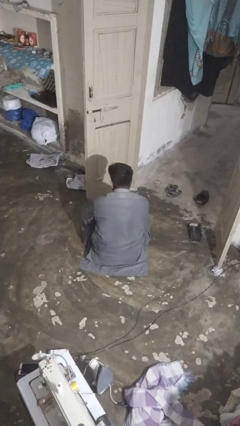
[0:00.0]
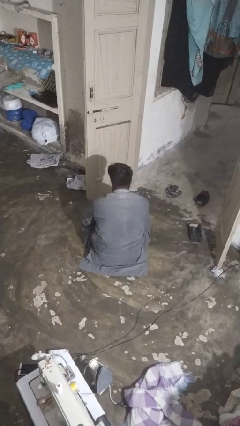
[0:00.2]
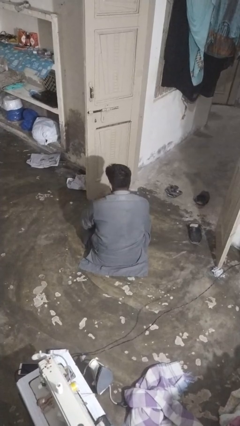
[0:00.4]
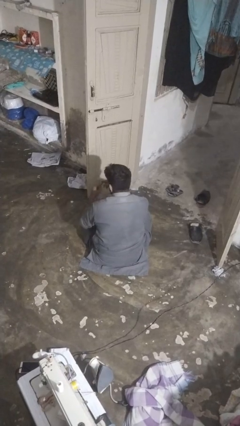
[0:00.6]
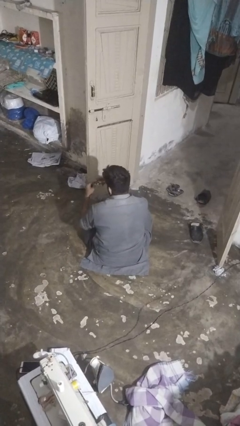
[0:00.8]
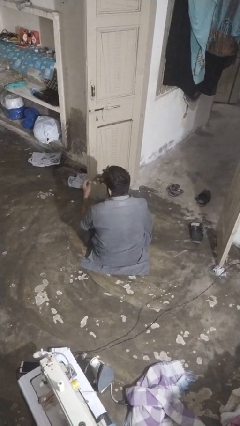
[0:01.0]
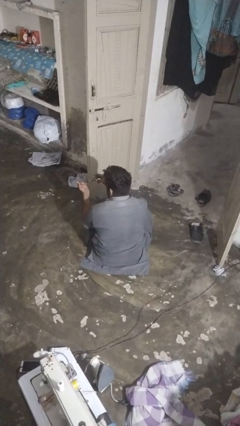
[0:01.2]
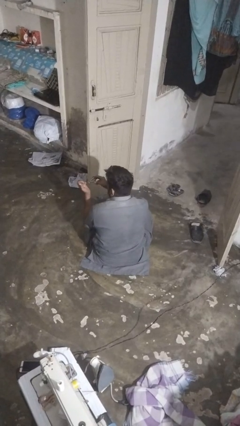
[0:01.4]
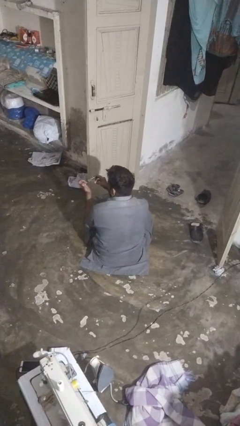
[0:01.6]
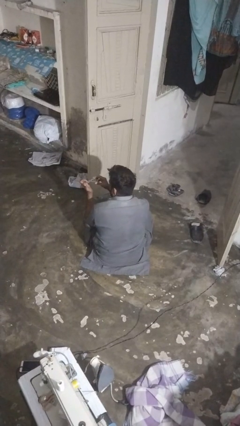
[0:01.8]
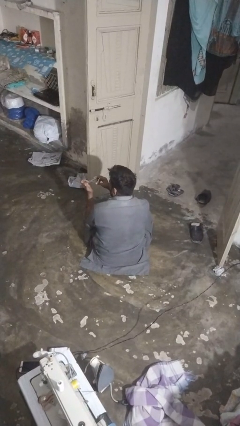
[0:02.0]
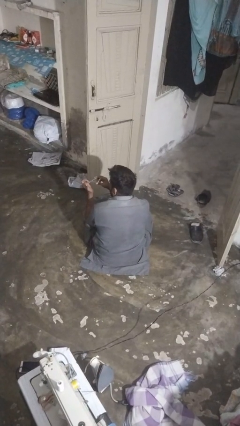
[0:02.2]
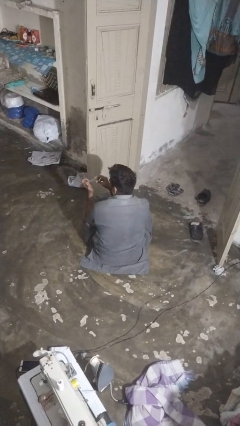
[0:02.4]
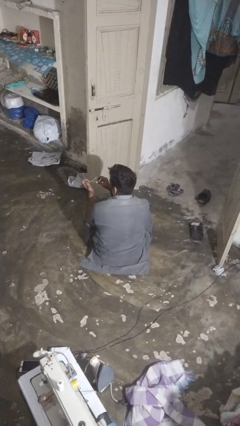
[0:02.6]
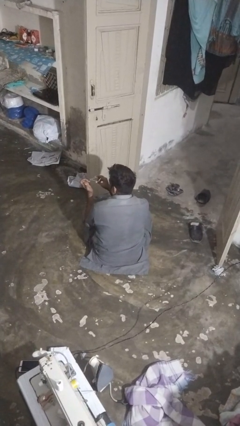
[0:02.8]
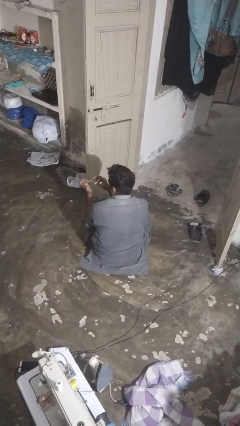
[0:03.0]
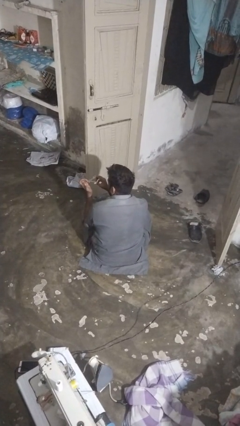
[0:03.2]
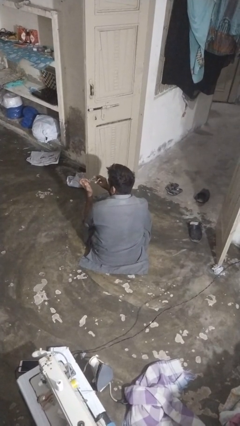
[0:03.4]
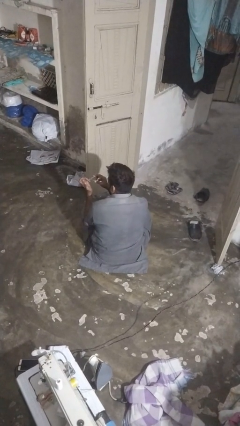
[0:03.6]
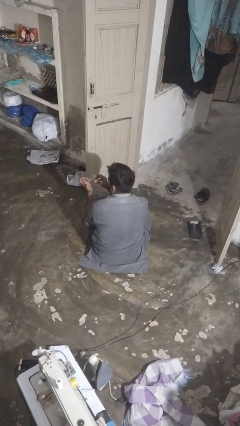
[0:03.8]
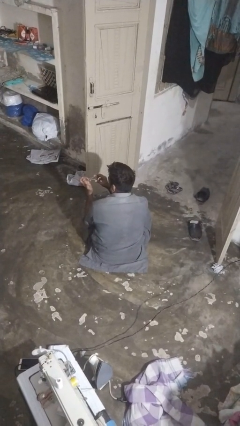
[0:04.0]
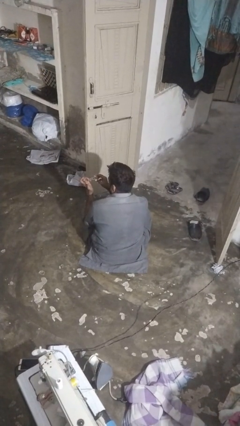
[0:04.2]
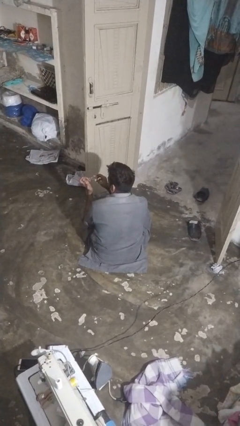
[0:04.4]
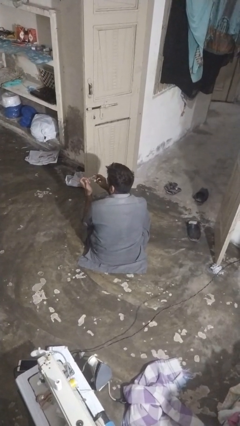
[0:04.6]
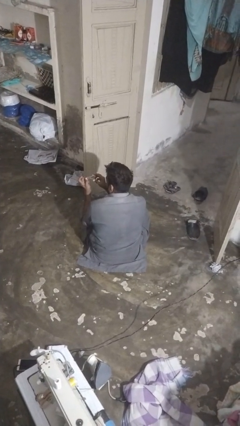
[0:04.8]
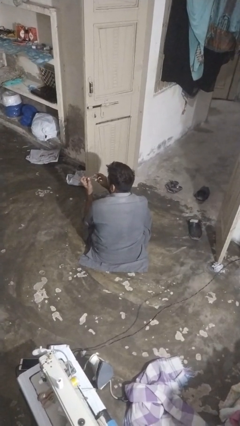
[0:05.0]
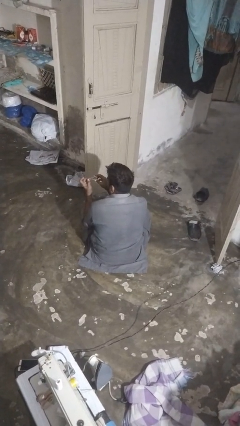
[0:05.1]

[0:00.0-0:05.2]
person clips fingernails

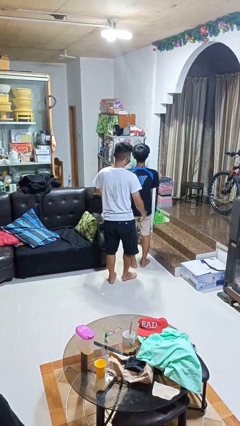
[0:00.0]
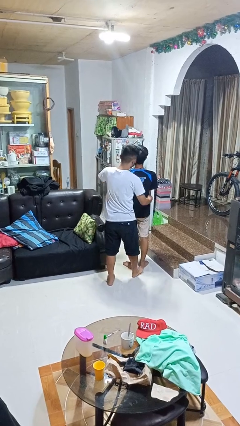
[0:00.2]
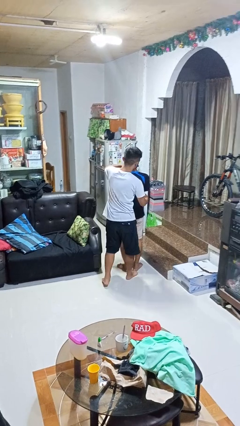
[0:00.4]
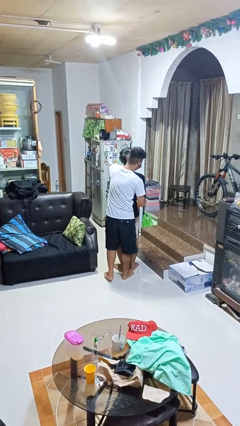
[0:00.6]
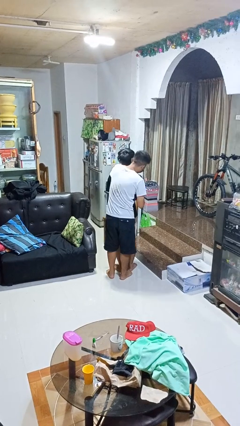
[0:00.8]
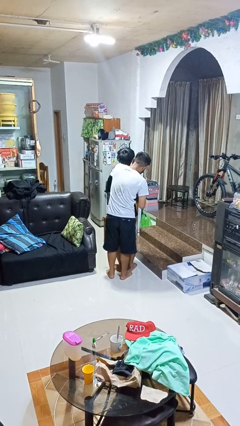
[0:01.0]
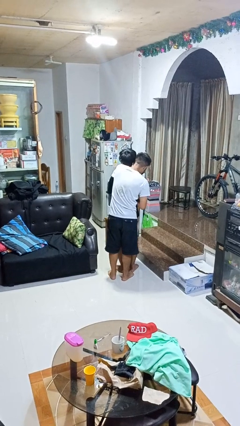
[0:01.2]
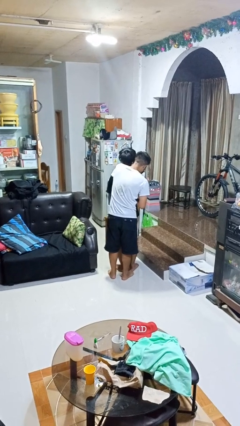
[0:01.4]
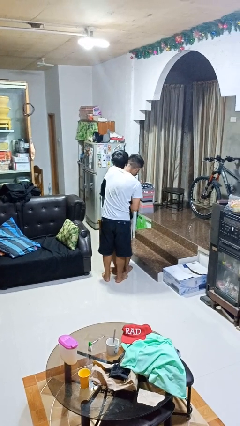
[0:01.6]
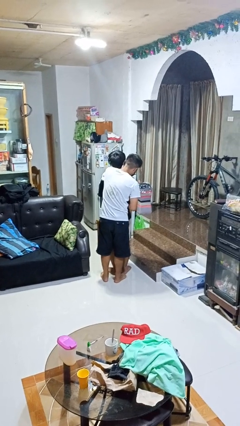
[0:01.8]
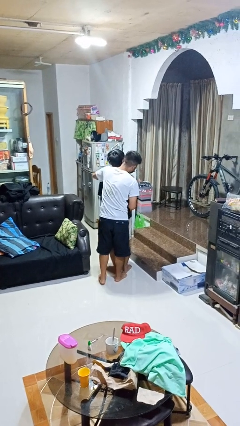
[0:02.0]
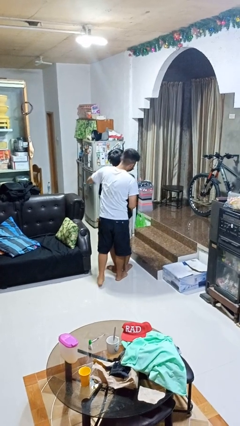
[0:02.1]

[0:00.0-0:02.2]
person hugs person from behind

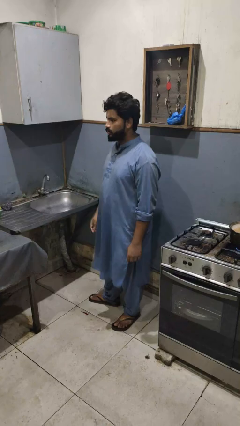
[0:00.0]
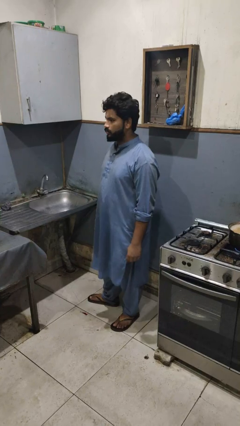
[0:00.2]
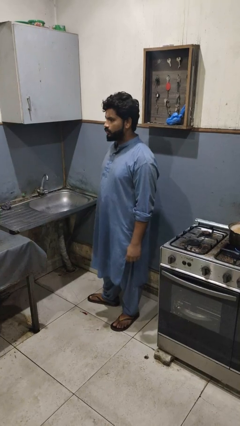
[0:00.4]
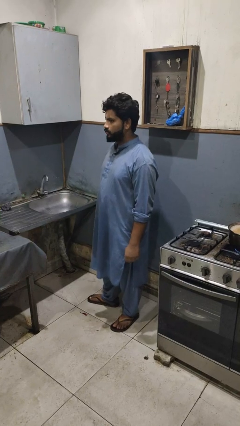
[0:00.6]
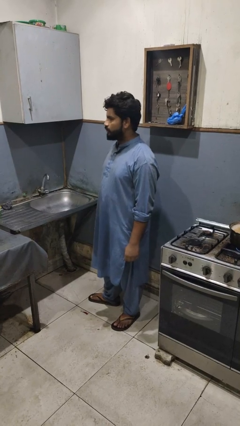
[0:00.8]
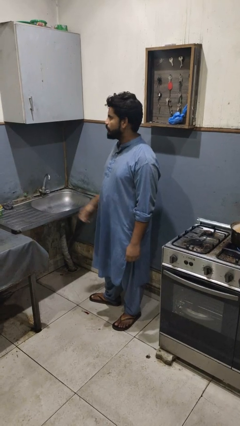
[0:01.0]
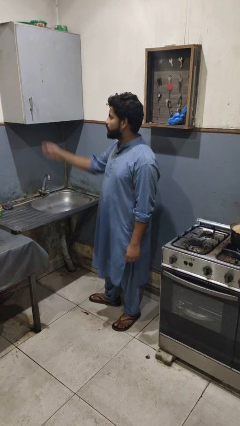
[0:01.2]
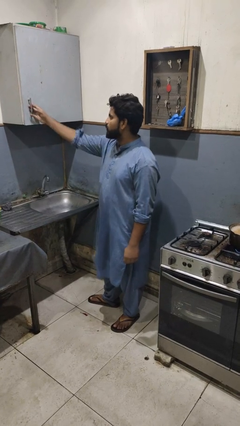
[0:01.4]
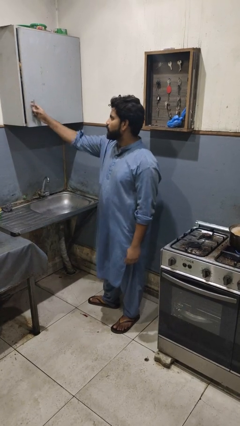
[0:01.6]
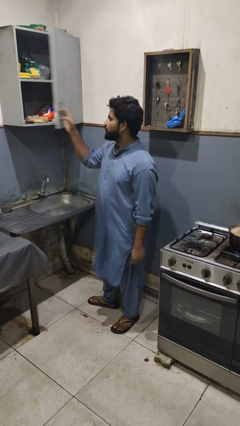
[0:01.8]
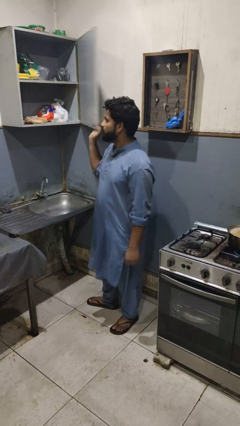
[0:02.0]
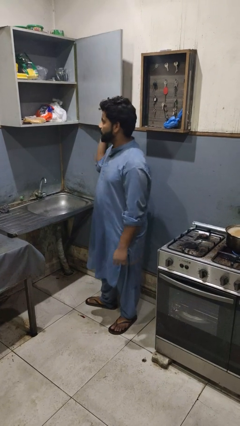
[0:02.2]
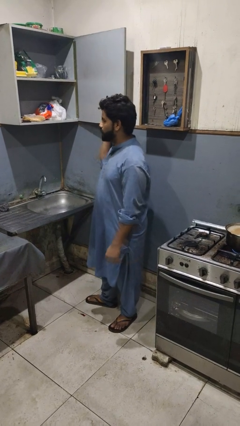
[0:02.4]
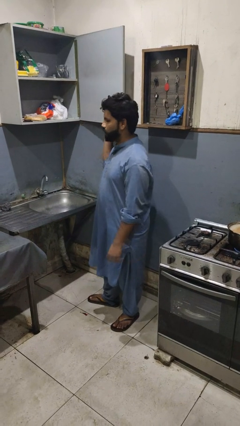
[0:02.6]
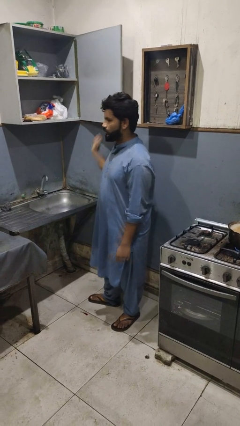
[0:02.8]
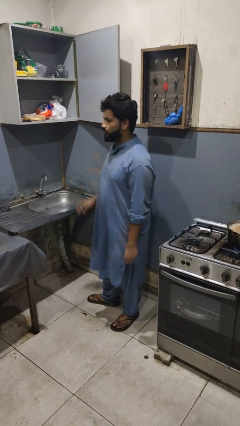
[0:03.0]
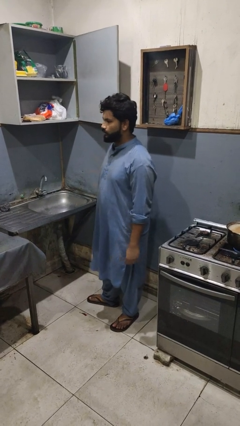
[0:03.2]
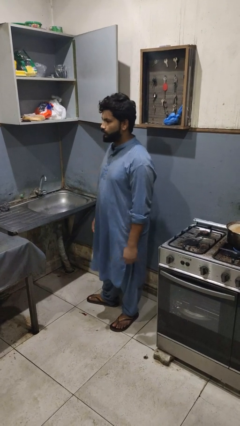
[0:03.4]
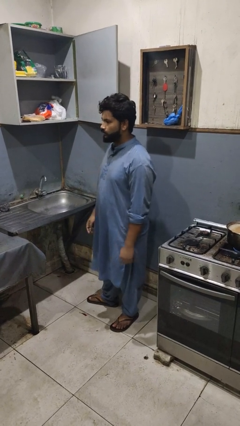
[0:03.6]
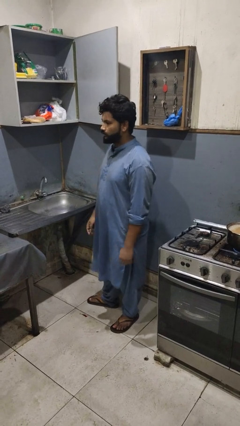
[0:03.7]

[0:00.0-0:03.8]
person closes cabinet

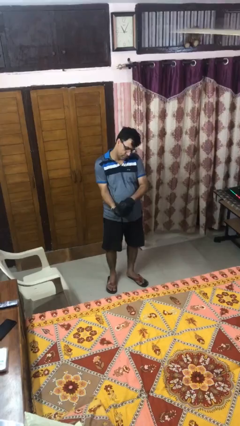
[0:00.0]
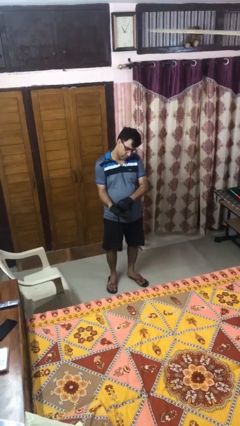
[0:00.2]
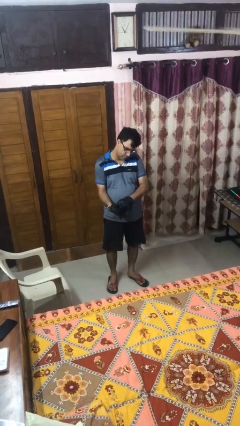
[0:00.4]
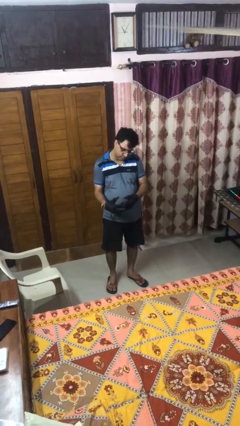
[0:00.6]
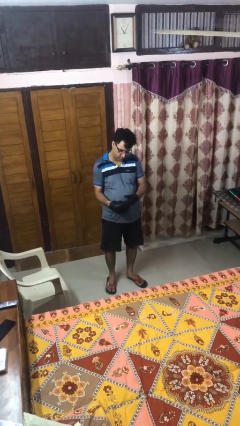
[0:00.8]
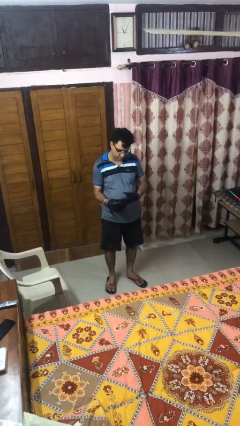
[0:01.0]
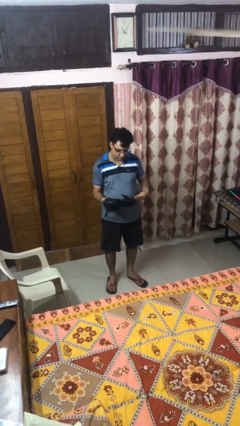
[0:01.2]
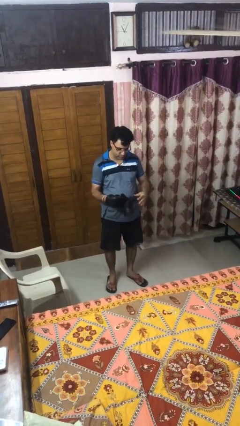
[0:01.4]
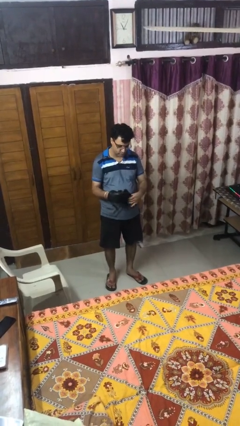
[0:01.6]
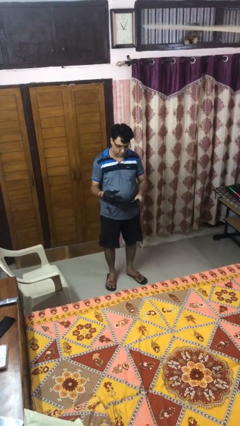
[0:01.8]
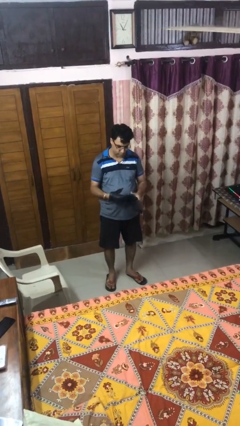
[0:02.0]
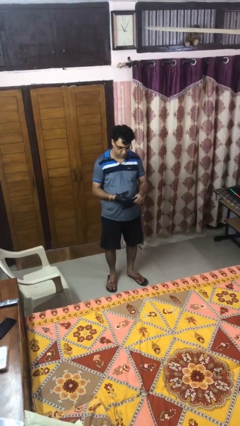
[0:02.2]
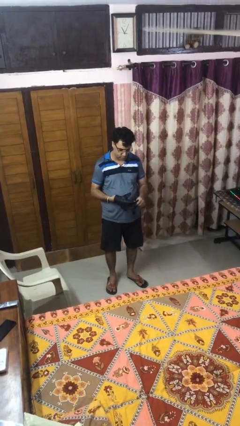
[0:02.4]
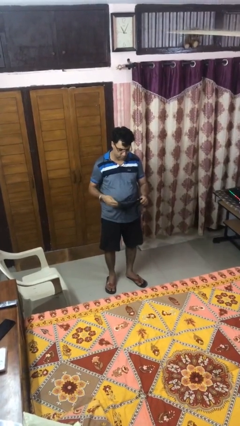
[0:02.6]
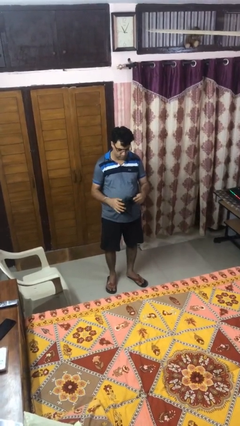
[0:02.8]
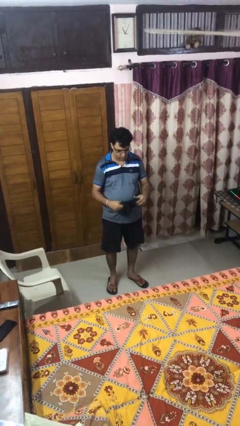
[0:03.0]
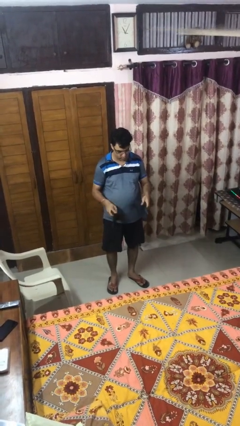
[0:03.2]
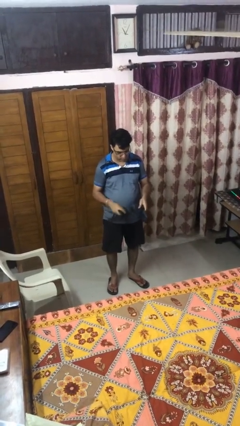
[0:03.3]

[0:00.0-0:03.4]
person takes off gloves

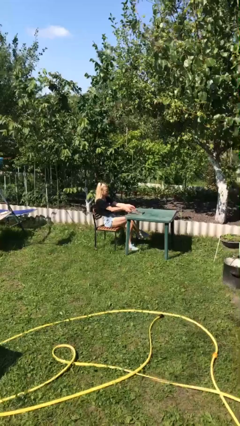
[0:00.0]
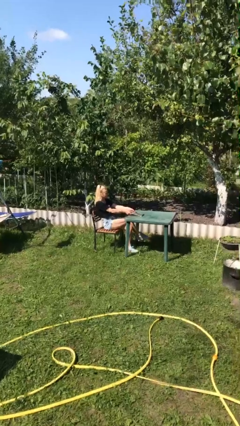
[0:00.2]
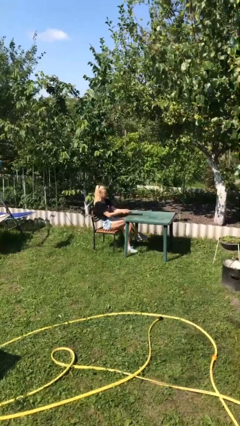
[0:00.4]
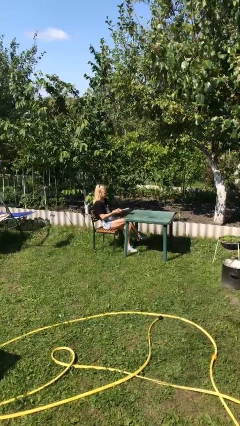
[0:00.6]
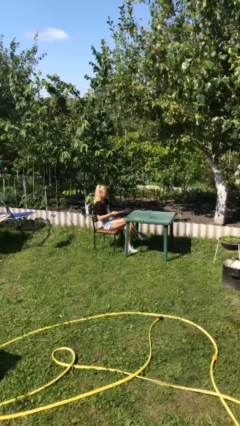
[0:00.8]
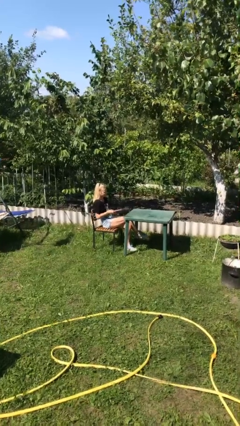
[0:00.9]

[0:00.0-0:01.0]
person picks up object from table

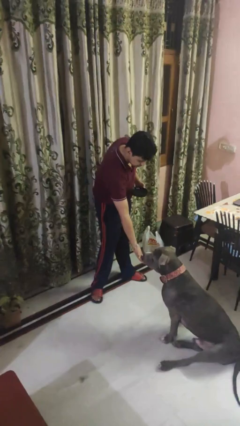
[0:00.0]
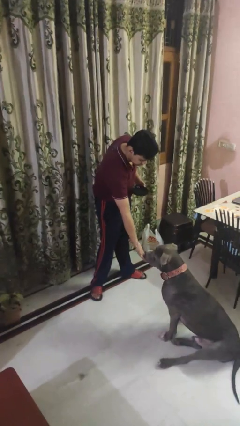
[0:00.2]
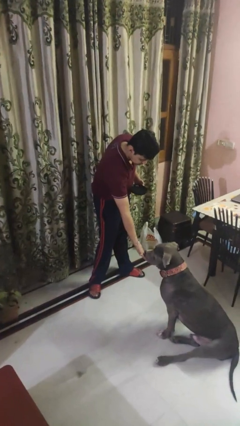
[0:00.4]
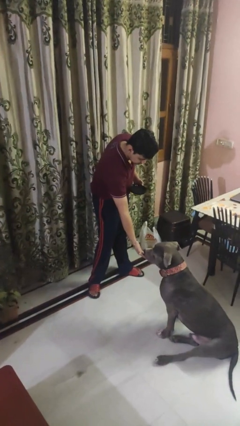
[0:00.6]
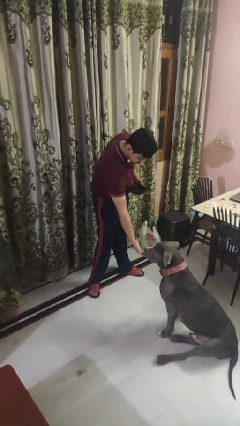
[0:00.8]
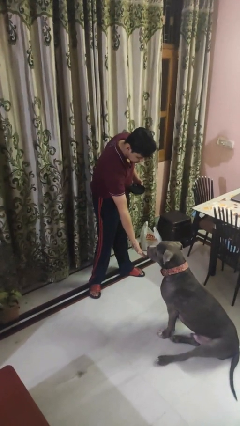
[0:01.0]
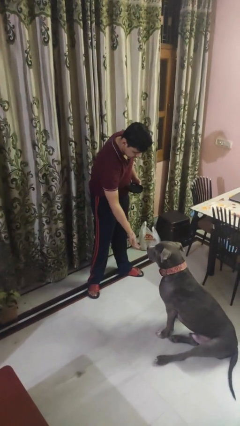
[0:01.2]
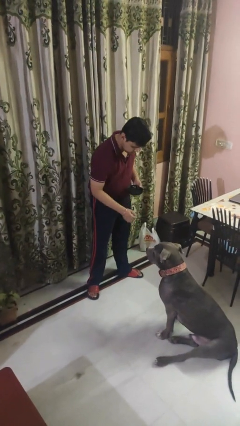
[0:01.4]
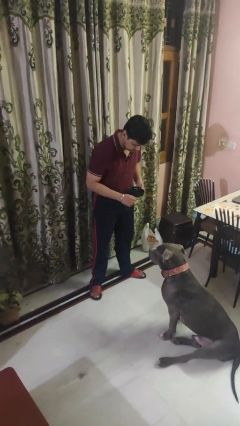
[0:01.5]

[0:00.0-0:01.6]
person feeds dog
